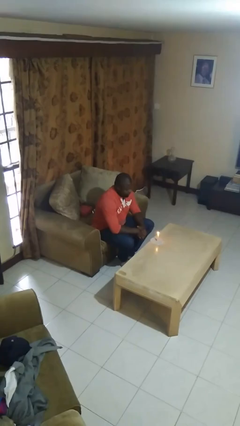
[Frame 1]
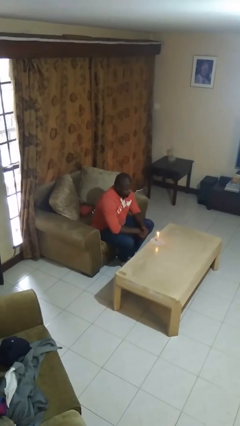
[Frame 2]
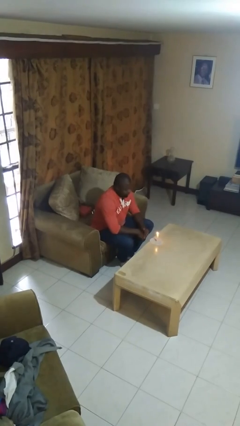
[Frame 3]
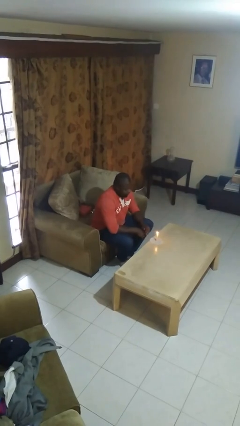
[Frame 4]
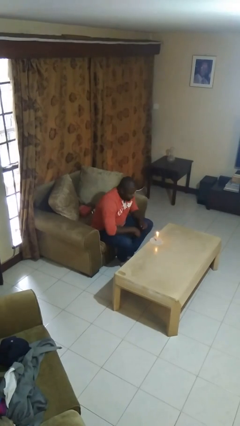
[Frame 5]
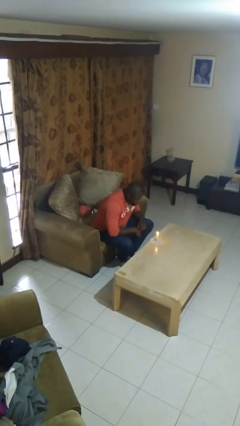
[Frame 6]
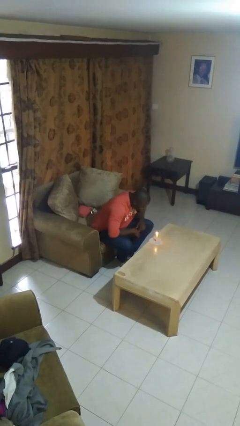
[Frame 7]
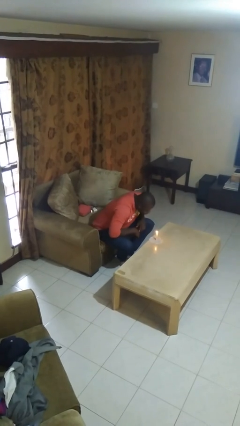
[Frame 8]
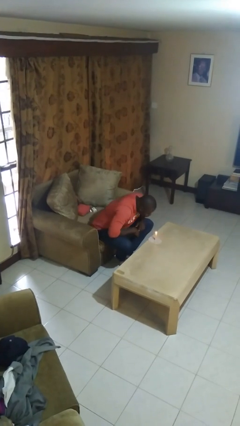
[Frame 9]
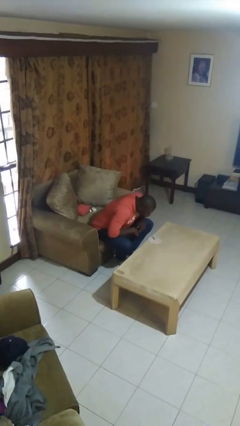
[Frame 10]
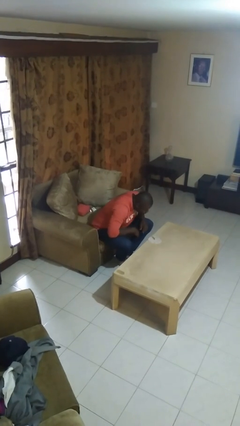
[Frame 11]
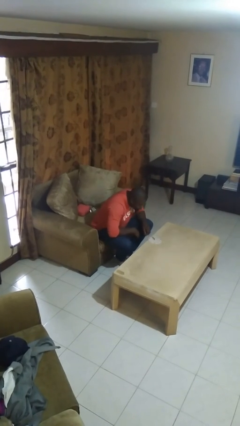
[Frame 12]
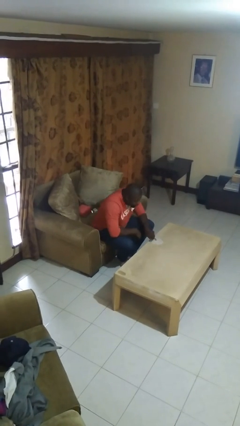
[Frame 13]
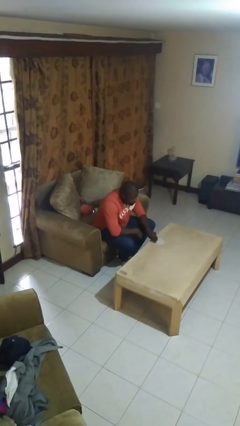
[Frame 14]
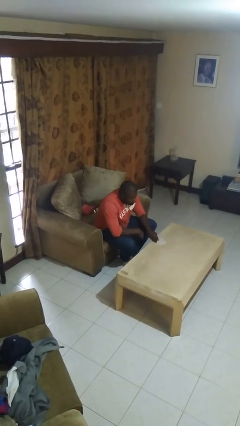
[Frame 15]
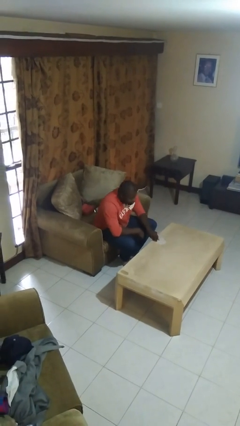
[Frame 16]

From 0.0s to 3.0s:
person extinguishes candle

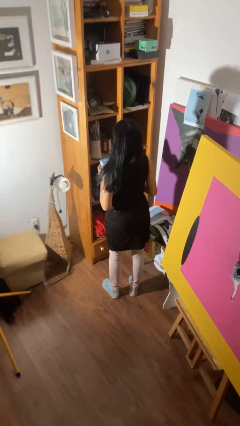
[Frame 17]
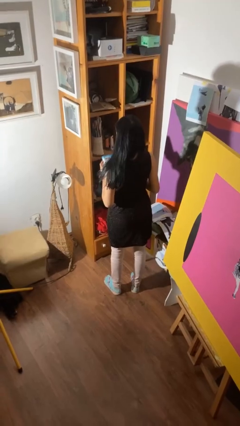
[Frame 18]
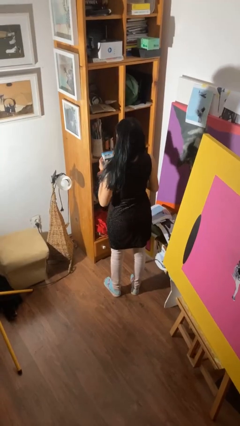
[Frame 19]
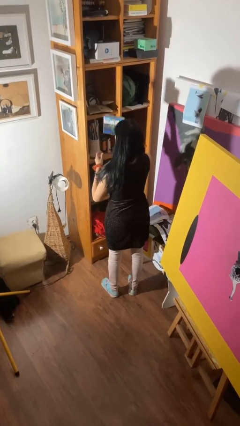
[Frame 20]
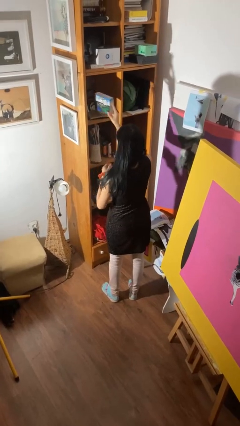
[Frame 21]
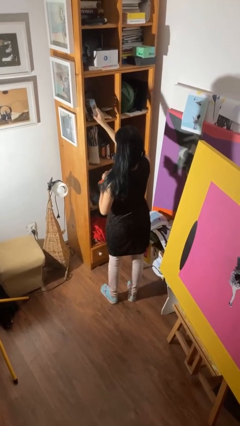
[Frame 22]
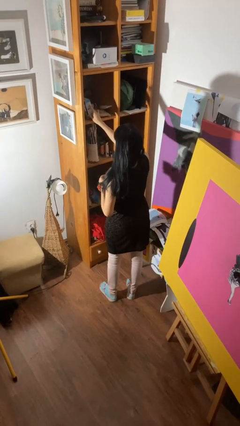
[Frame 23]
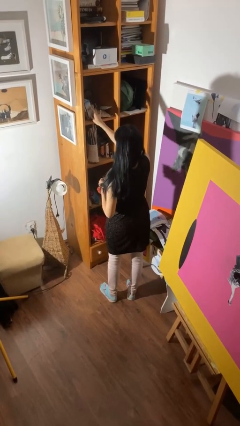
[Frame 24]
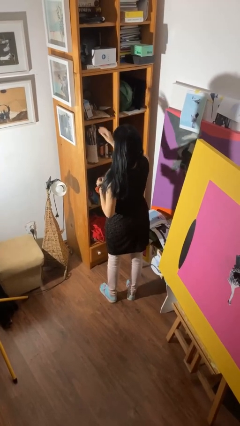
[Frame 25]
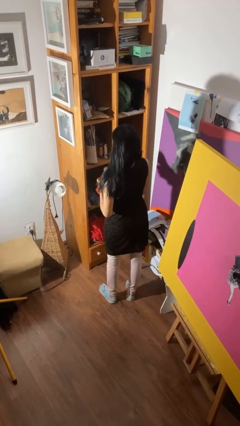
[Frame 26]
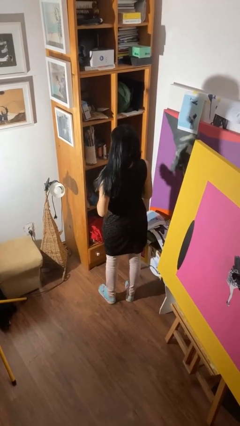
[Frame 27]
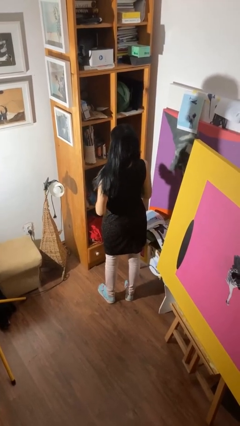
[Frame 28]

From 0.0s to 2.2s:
person puts down object on shelf

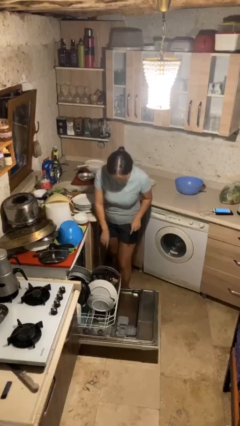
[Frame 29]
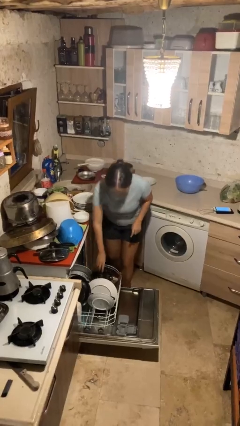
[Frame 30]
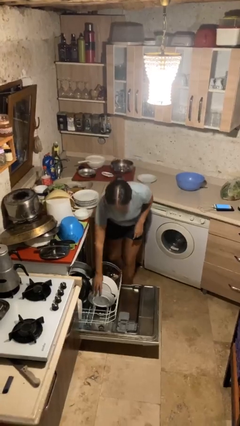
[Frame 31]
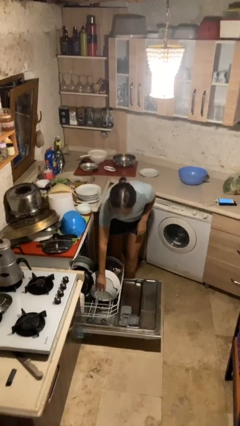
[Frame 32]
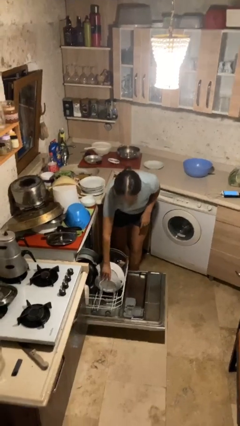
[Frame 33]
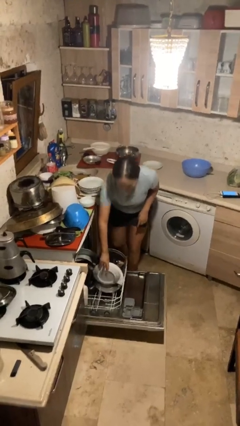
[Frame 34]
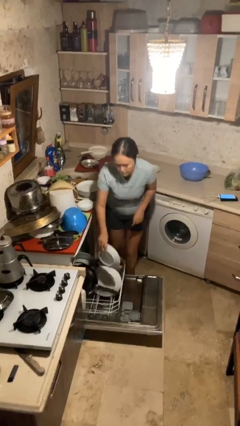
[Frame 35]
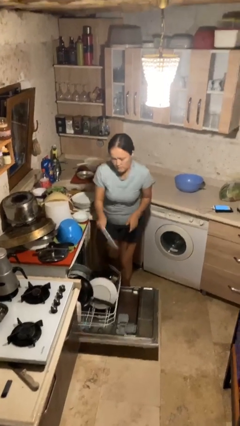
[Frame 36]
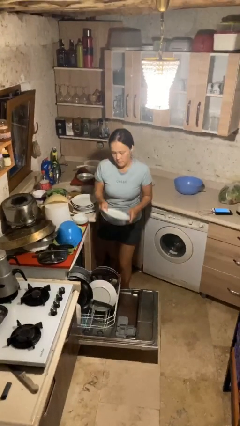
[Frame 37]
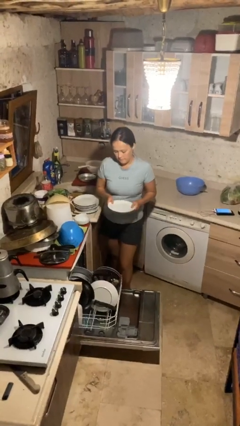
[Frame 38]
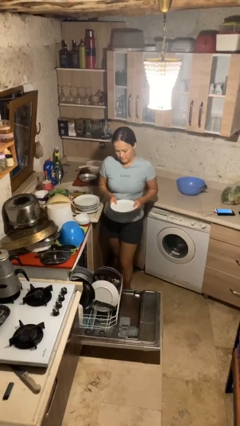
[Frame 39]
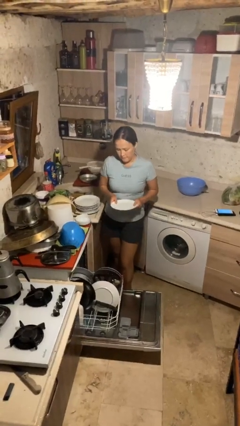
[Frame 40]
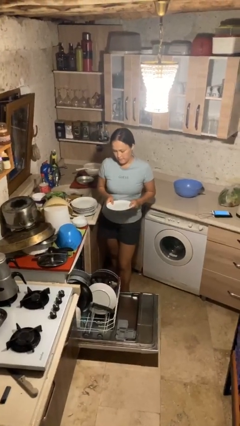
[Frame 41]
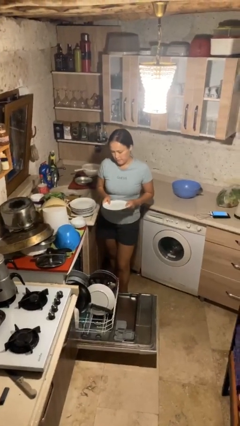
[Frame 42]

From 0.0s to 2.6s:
person unloads dishwasher

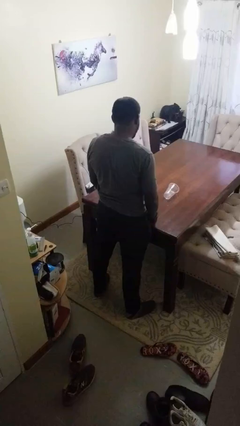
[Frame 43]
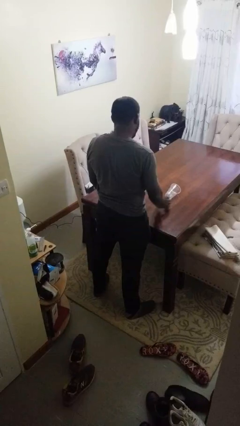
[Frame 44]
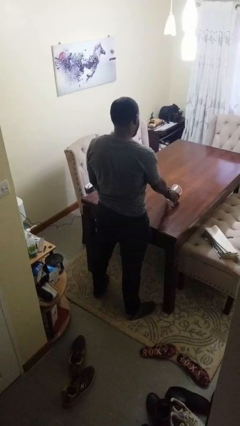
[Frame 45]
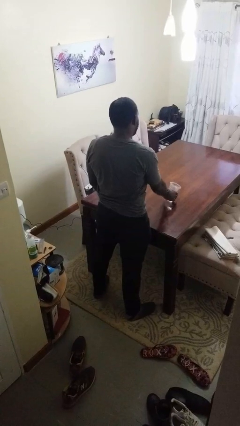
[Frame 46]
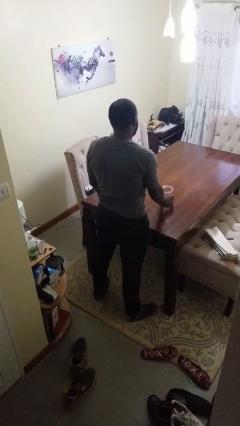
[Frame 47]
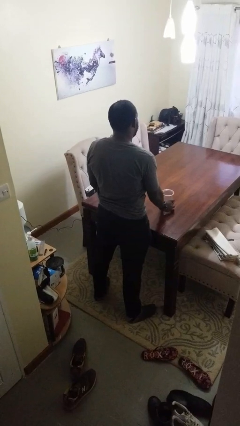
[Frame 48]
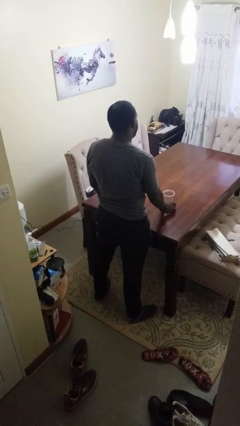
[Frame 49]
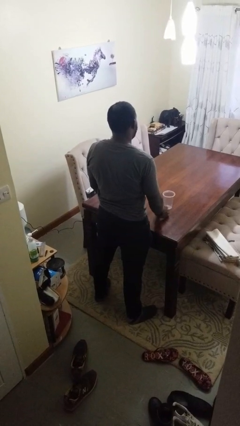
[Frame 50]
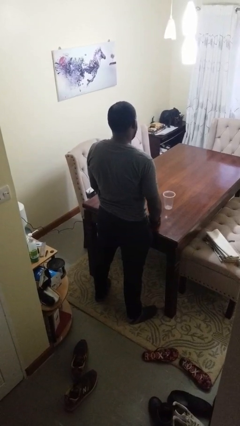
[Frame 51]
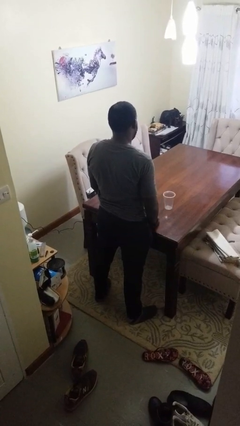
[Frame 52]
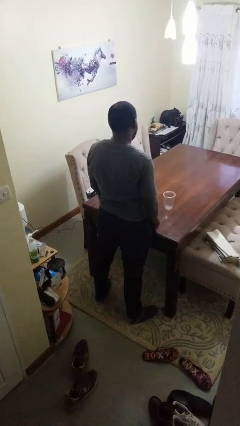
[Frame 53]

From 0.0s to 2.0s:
person sets upright glass

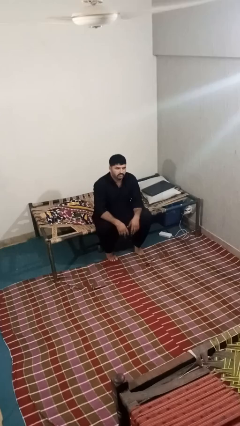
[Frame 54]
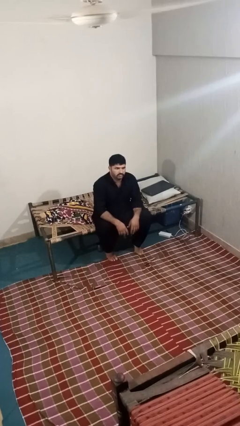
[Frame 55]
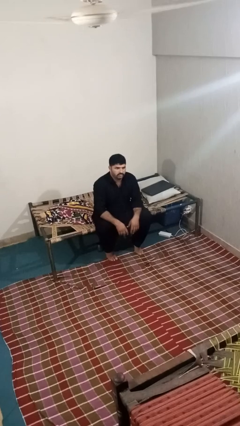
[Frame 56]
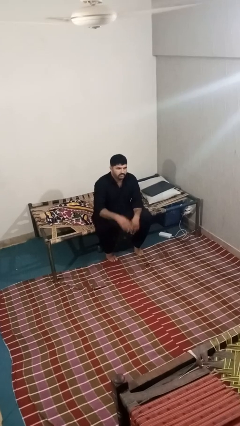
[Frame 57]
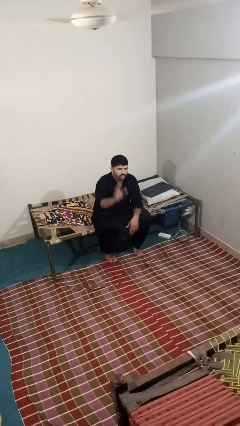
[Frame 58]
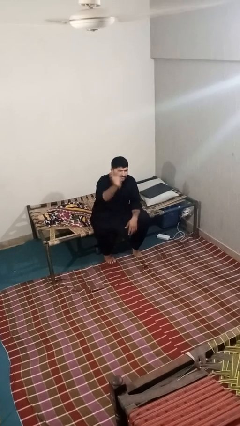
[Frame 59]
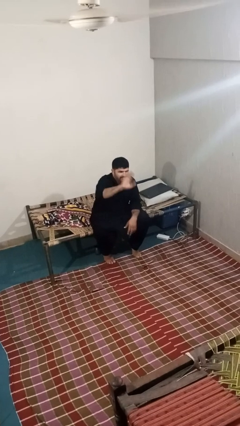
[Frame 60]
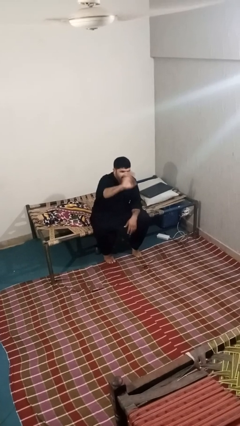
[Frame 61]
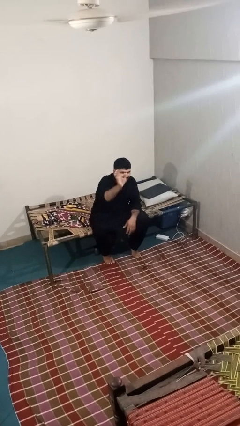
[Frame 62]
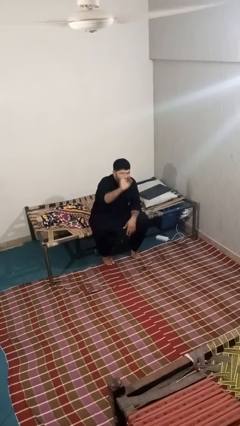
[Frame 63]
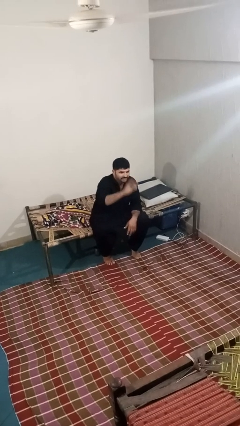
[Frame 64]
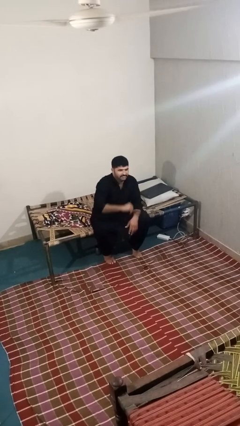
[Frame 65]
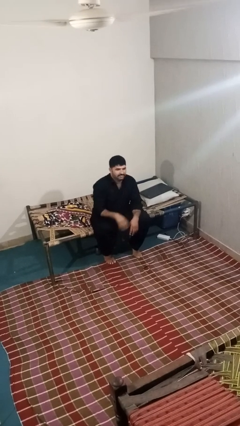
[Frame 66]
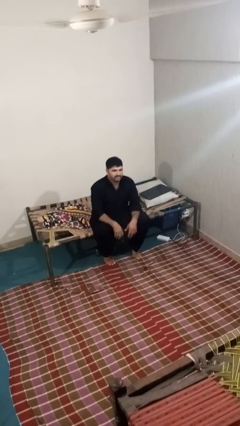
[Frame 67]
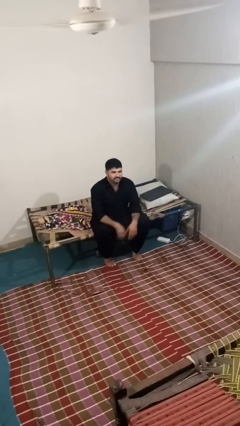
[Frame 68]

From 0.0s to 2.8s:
person waves at person

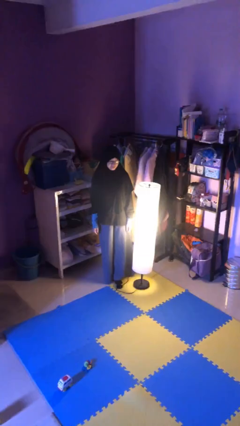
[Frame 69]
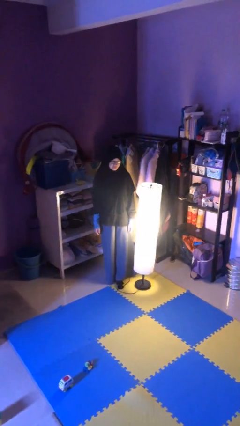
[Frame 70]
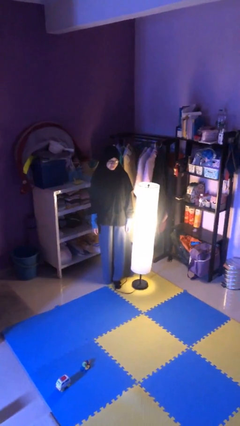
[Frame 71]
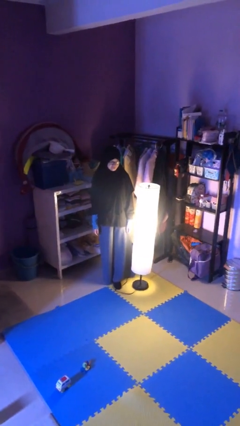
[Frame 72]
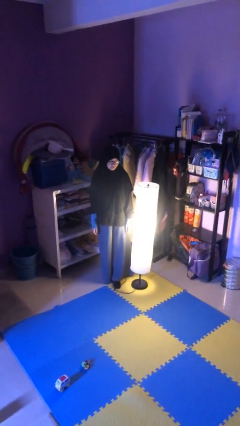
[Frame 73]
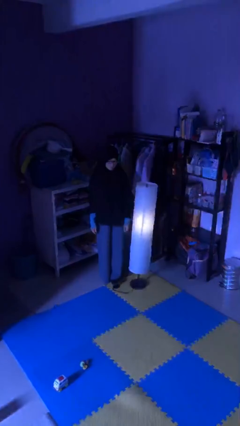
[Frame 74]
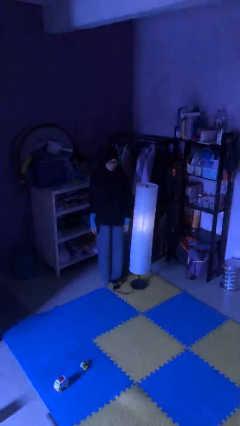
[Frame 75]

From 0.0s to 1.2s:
person turns off lamp

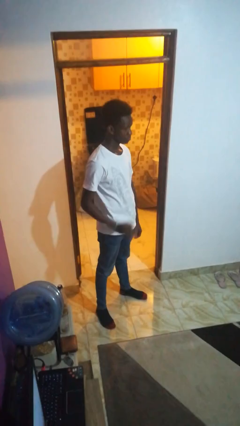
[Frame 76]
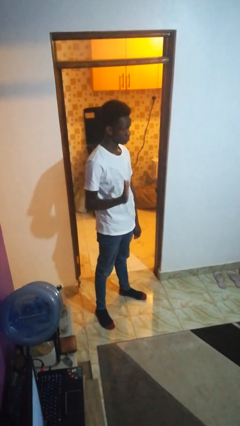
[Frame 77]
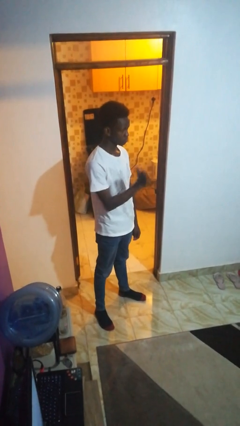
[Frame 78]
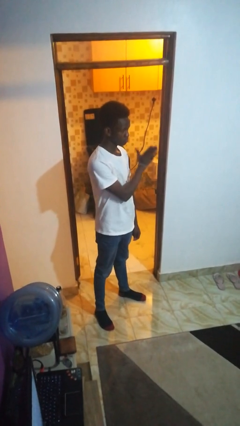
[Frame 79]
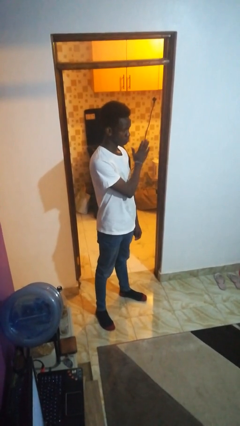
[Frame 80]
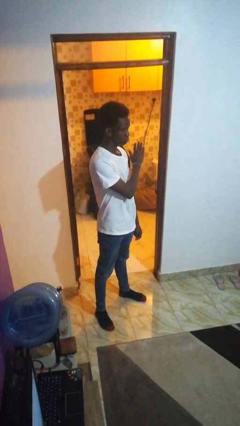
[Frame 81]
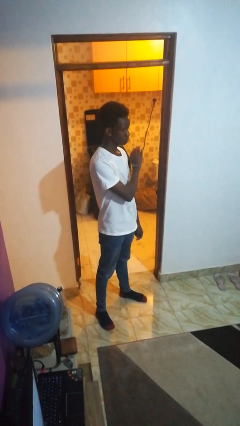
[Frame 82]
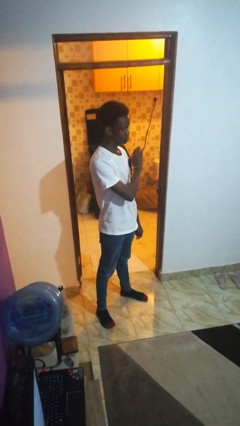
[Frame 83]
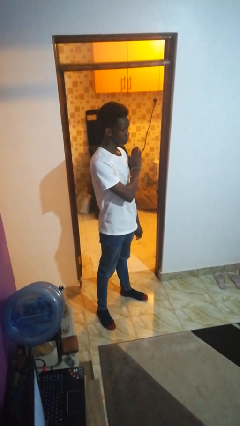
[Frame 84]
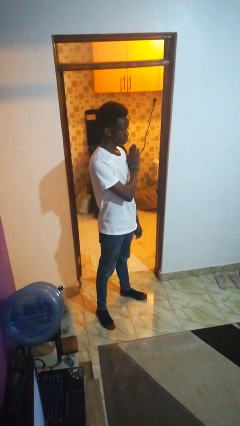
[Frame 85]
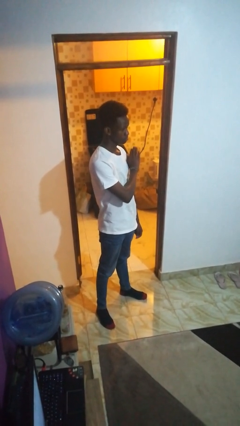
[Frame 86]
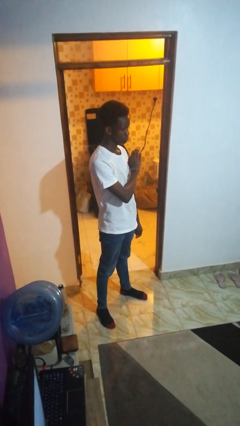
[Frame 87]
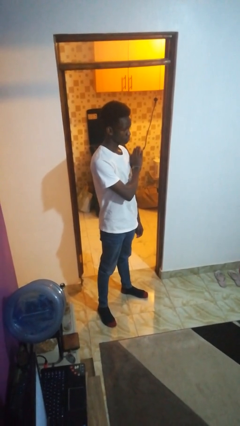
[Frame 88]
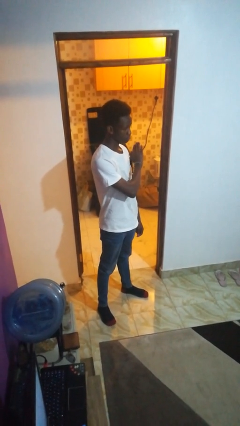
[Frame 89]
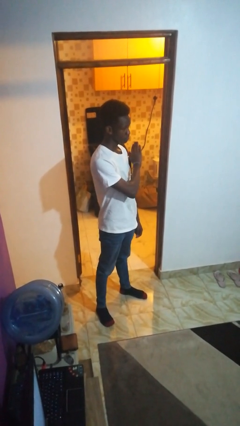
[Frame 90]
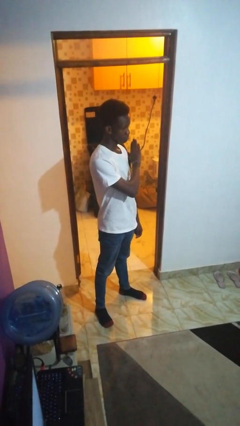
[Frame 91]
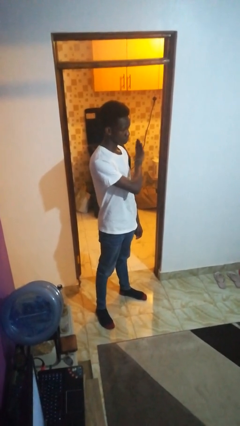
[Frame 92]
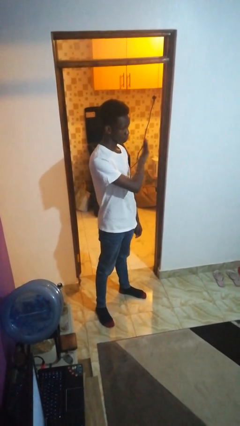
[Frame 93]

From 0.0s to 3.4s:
person gestures swipe left
